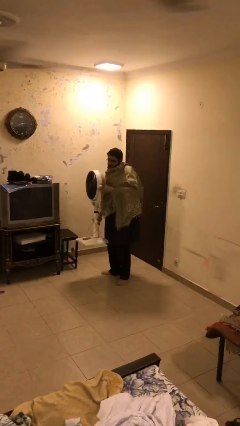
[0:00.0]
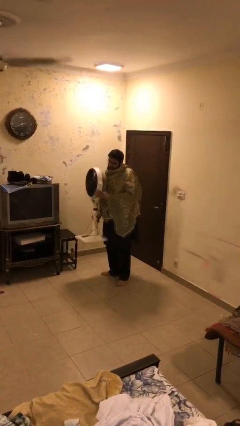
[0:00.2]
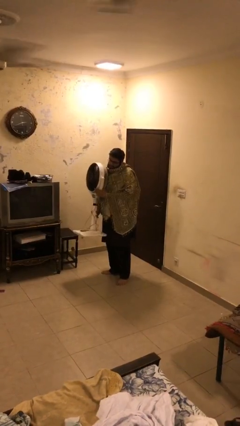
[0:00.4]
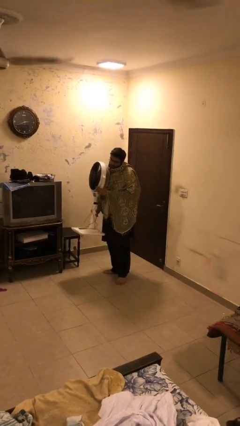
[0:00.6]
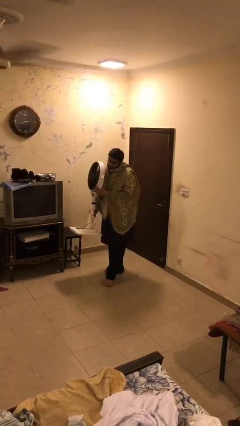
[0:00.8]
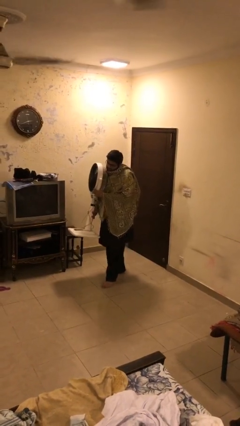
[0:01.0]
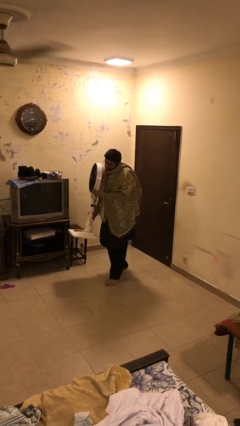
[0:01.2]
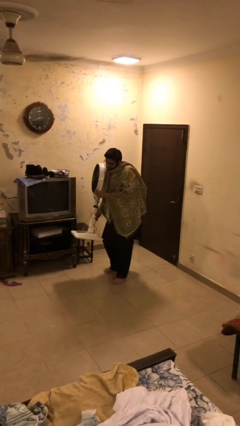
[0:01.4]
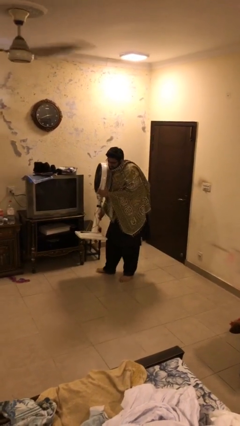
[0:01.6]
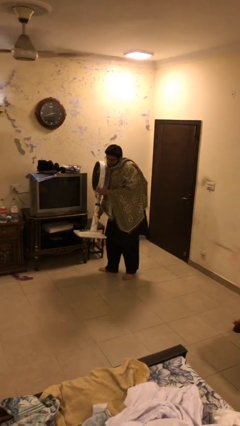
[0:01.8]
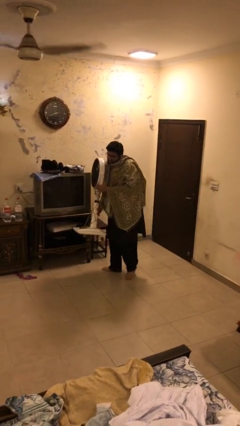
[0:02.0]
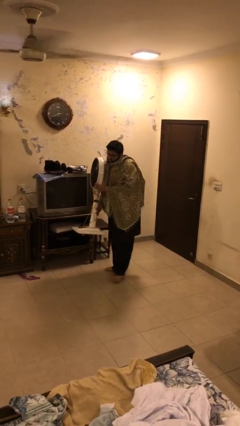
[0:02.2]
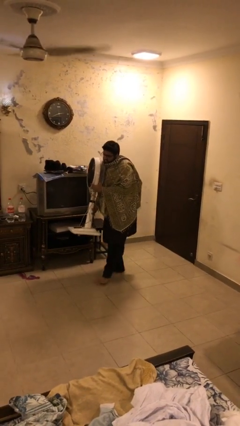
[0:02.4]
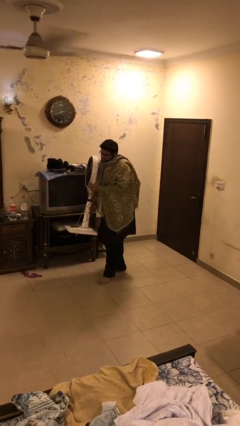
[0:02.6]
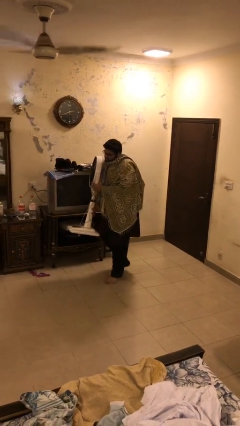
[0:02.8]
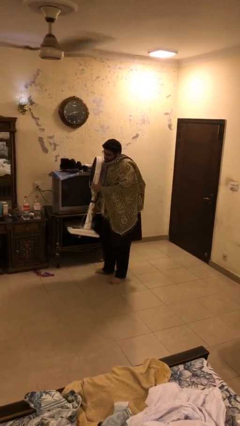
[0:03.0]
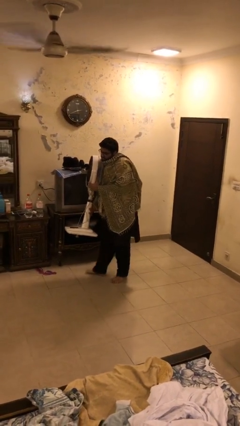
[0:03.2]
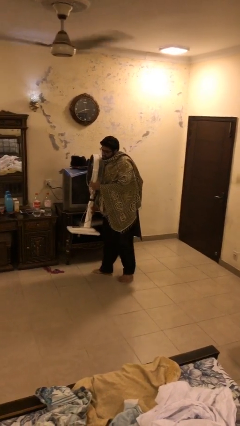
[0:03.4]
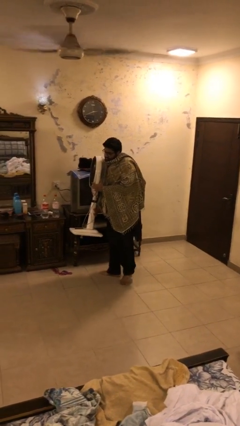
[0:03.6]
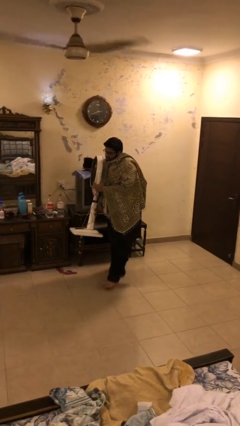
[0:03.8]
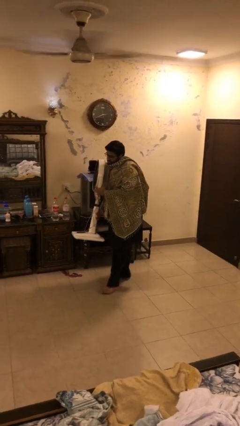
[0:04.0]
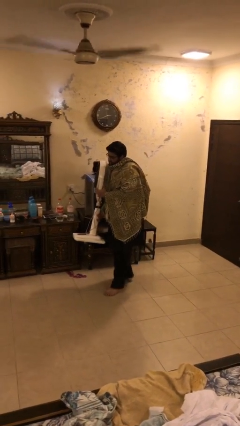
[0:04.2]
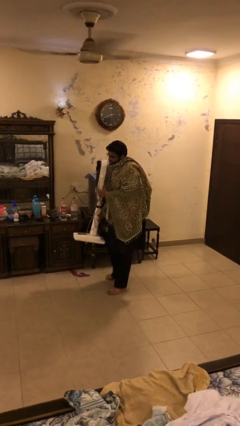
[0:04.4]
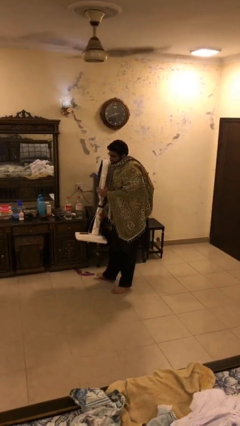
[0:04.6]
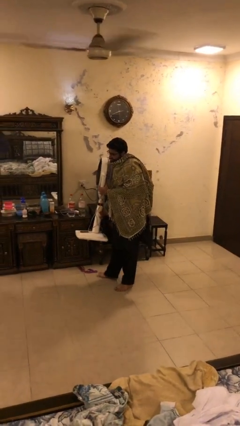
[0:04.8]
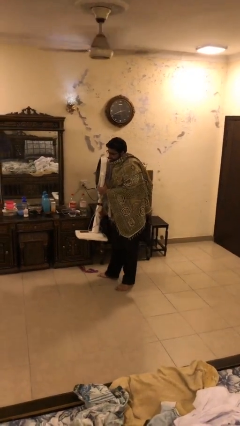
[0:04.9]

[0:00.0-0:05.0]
person carries heavy object

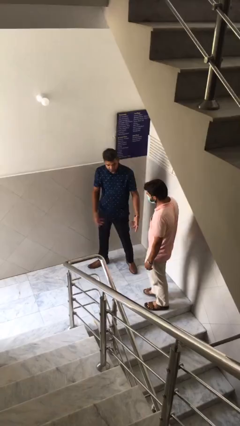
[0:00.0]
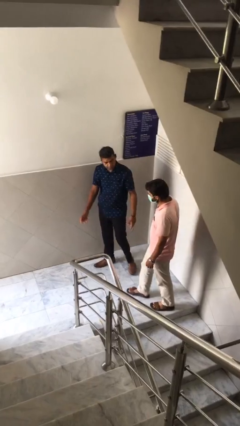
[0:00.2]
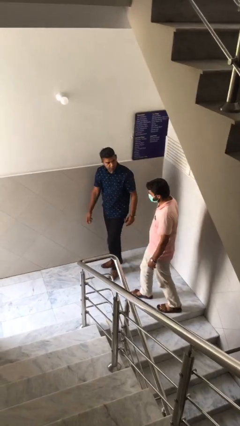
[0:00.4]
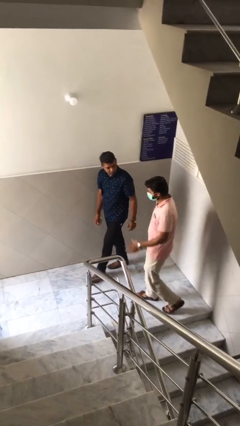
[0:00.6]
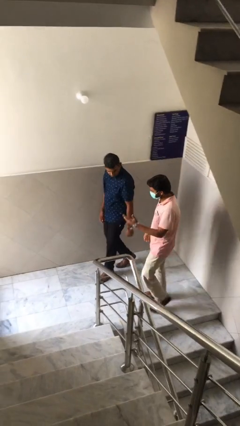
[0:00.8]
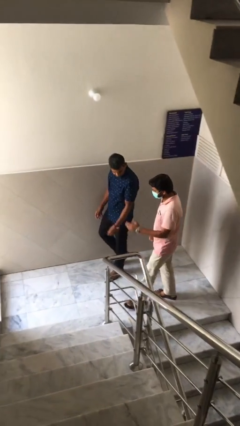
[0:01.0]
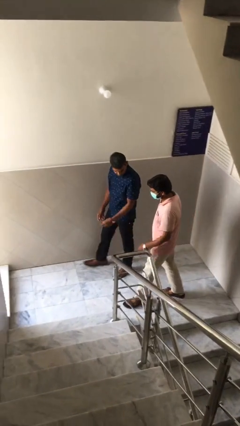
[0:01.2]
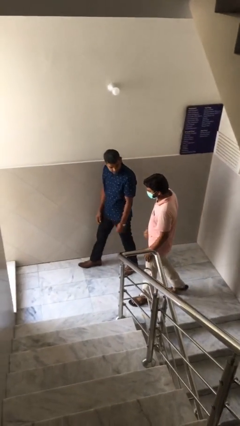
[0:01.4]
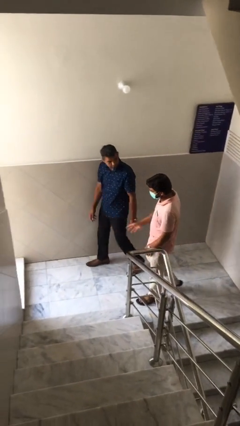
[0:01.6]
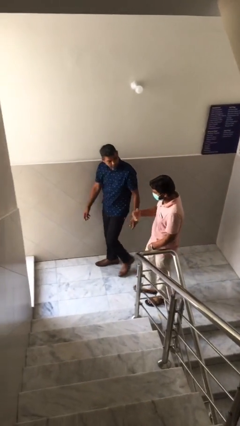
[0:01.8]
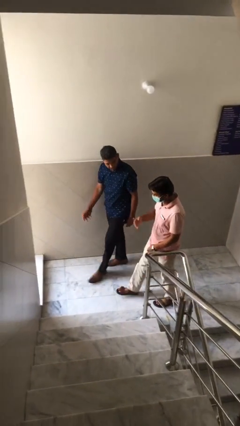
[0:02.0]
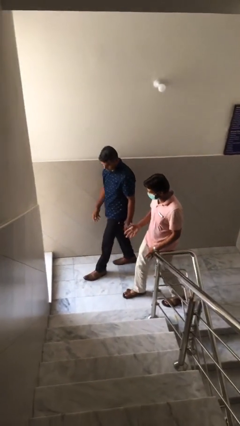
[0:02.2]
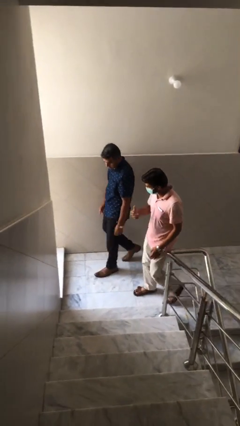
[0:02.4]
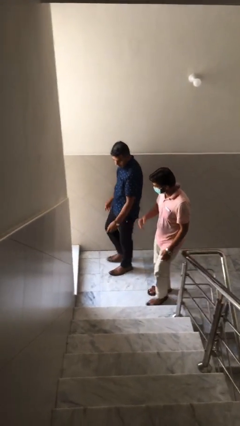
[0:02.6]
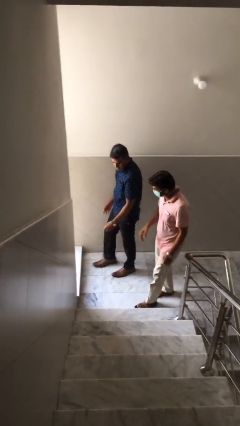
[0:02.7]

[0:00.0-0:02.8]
person talks to person

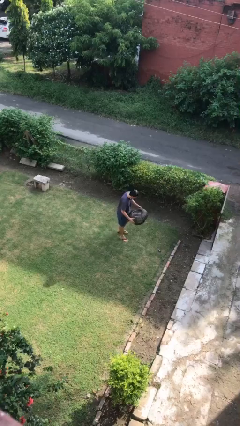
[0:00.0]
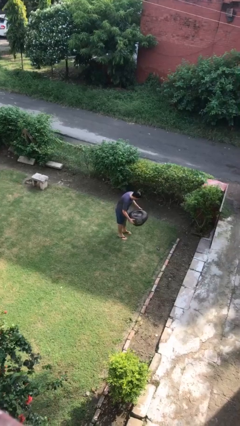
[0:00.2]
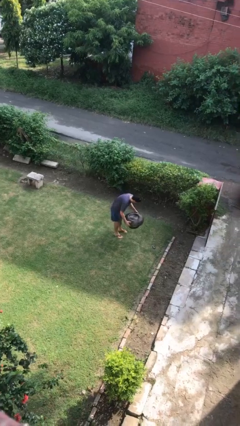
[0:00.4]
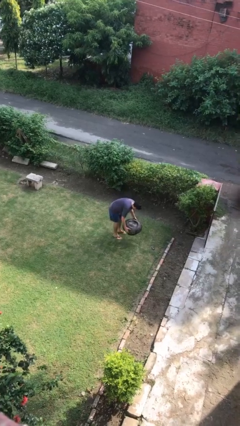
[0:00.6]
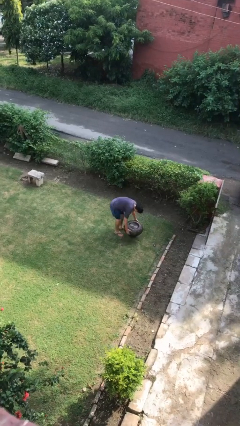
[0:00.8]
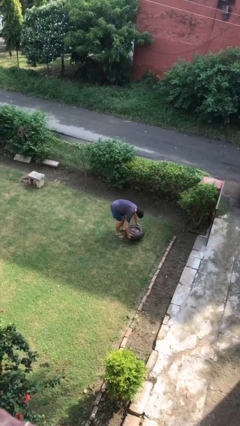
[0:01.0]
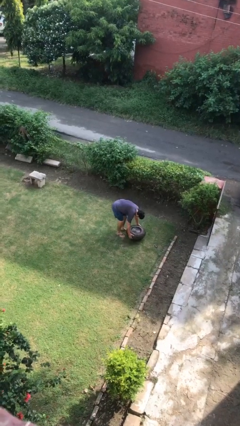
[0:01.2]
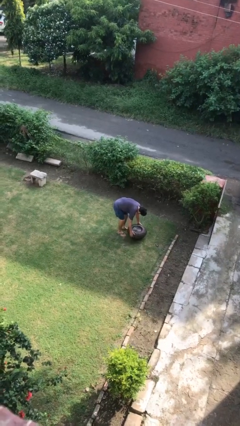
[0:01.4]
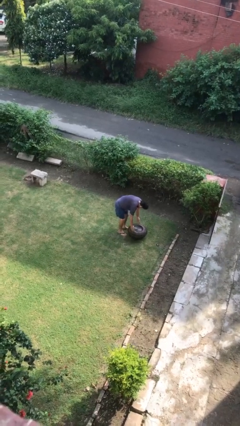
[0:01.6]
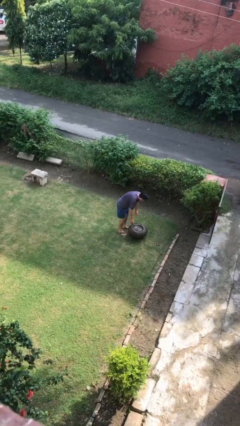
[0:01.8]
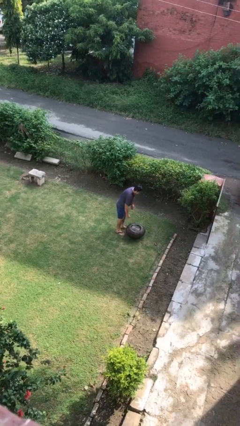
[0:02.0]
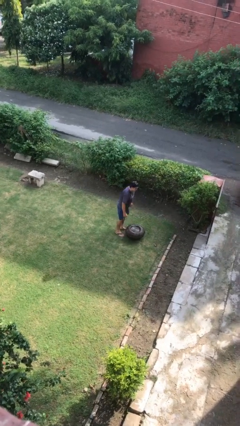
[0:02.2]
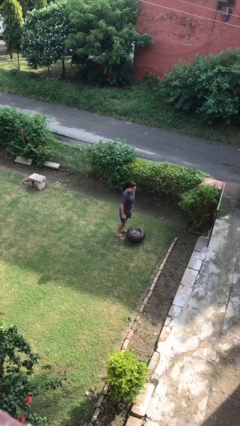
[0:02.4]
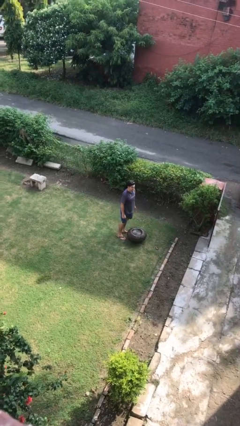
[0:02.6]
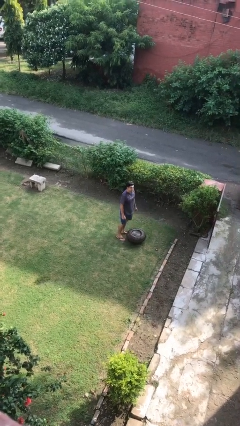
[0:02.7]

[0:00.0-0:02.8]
person puts down object on floor

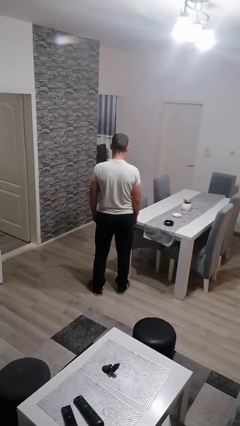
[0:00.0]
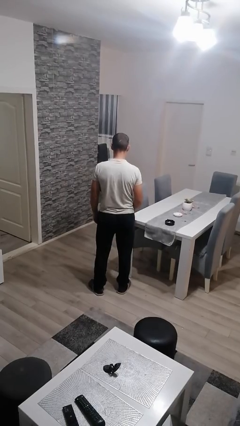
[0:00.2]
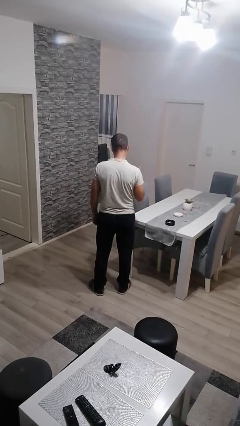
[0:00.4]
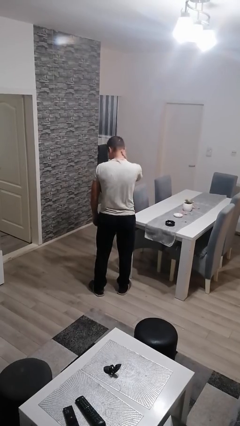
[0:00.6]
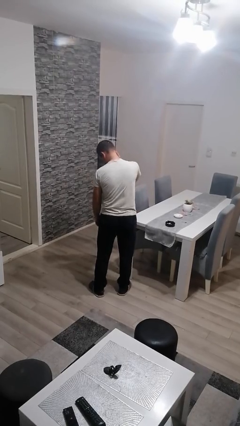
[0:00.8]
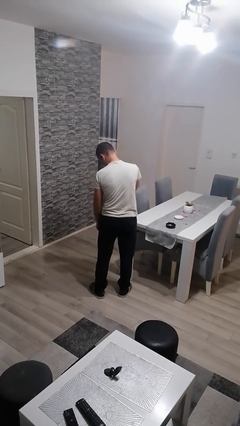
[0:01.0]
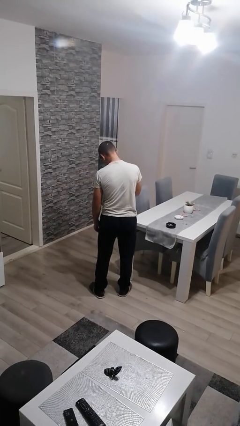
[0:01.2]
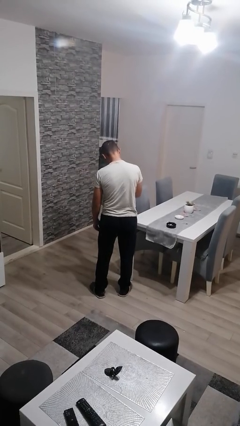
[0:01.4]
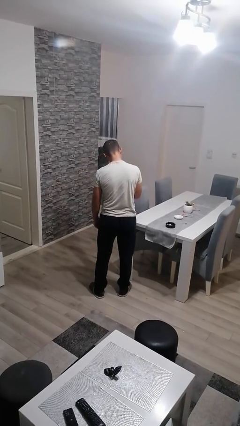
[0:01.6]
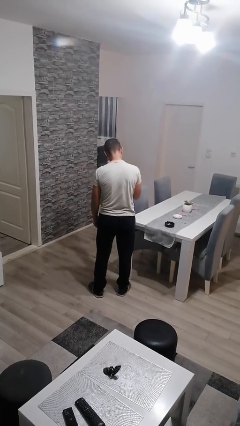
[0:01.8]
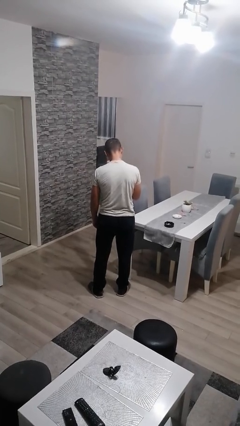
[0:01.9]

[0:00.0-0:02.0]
person swats bug

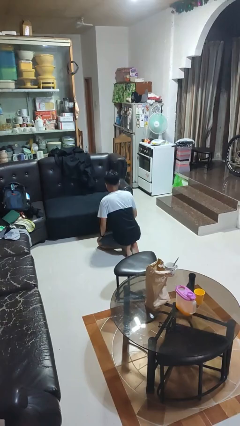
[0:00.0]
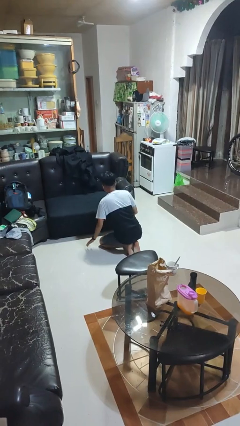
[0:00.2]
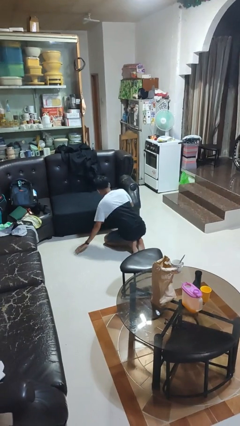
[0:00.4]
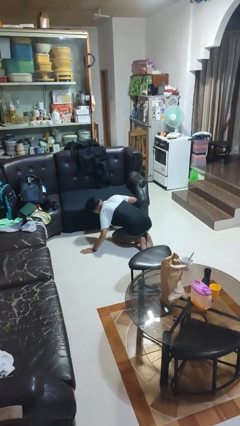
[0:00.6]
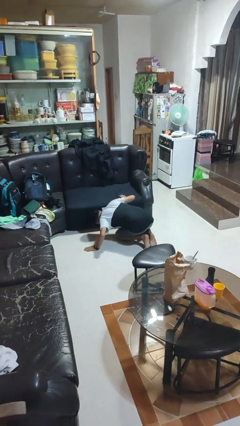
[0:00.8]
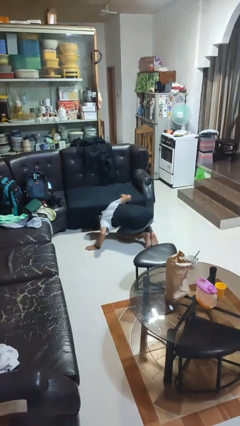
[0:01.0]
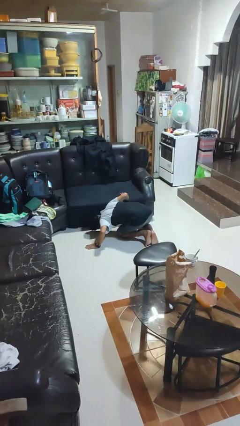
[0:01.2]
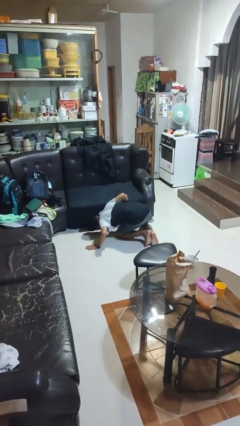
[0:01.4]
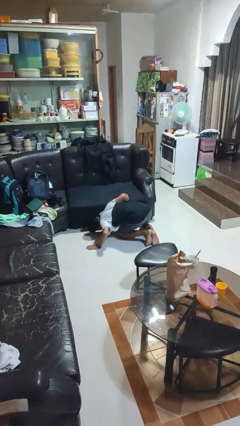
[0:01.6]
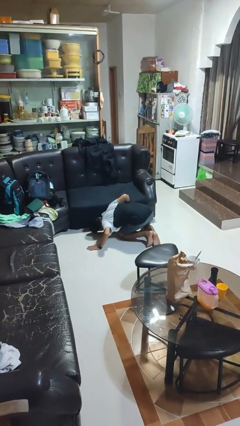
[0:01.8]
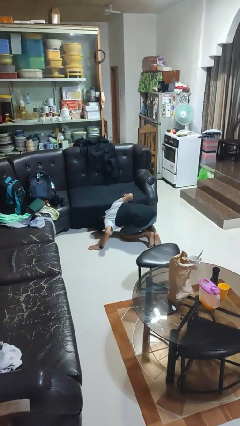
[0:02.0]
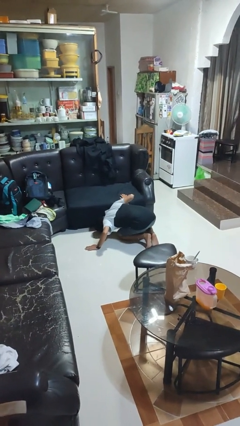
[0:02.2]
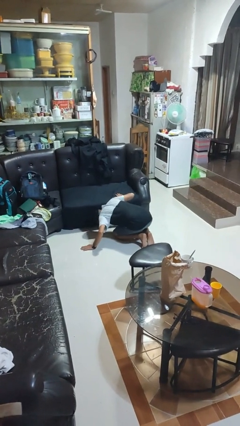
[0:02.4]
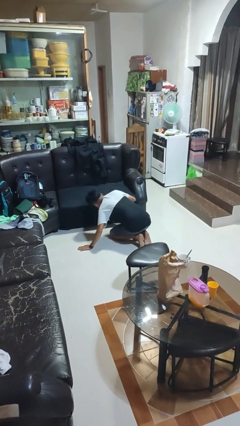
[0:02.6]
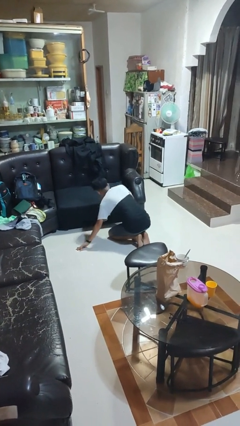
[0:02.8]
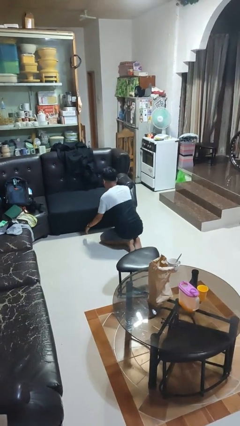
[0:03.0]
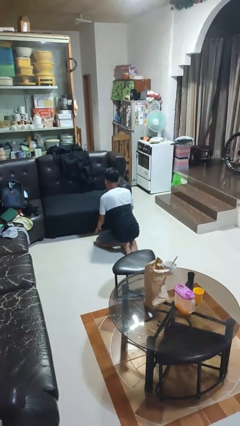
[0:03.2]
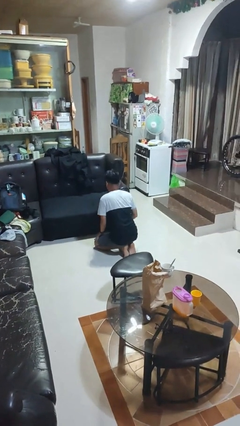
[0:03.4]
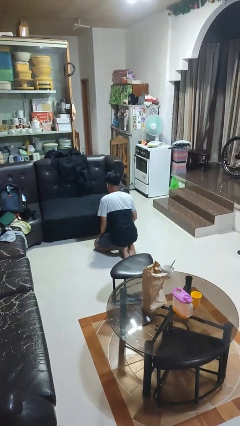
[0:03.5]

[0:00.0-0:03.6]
person searches under couch

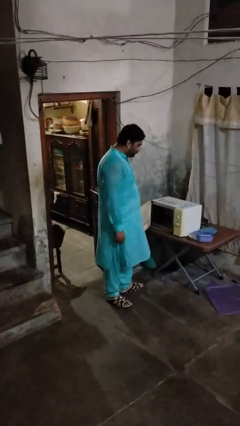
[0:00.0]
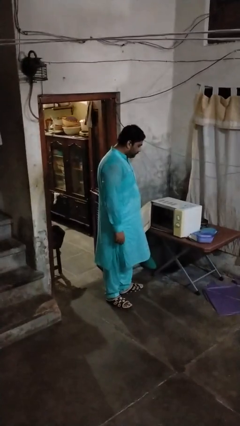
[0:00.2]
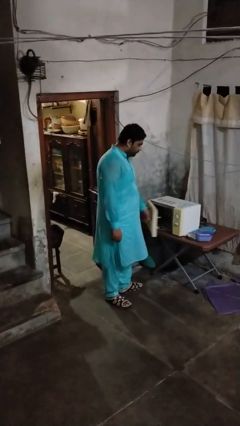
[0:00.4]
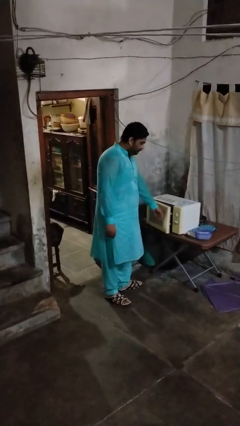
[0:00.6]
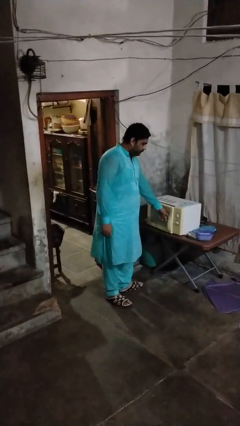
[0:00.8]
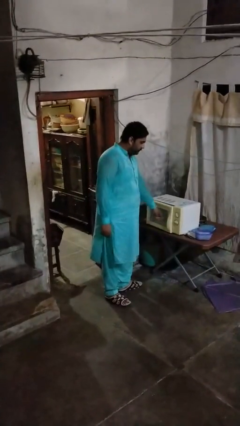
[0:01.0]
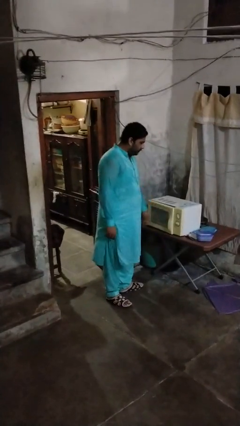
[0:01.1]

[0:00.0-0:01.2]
person closes microwave
